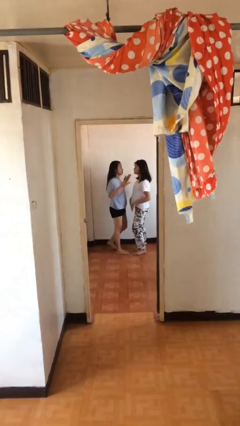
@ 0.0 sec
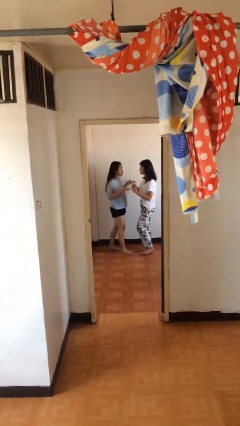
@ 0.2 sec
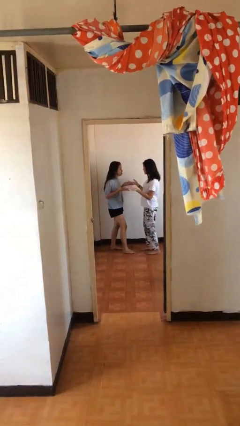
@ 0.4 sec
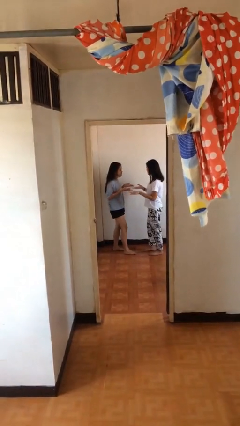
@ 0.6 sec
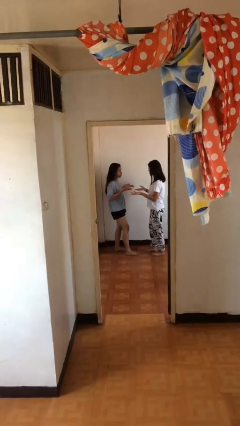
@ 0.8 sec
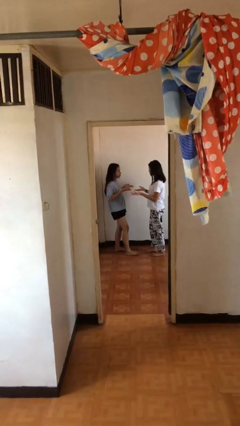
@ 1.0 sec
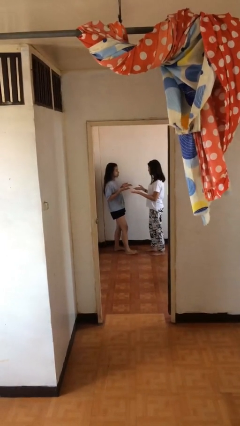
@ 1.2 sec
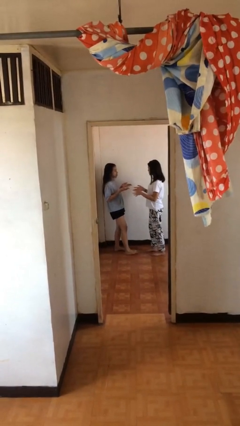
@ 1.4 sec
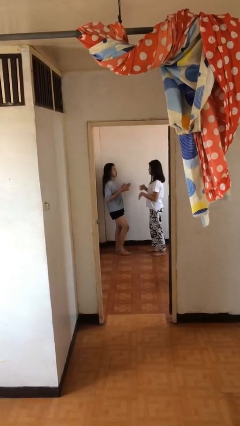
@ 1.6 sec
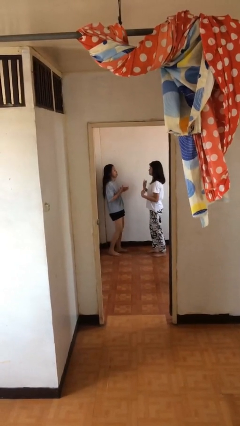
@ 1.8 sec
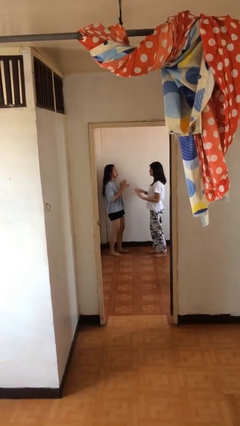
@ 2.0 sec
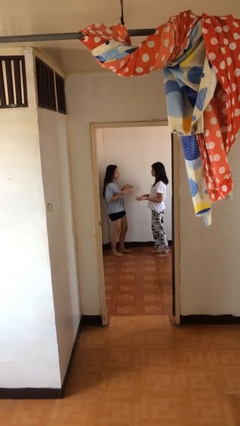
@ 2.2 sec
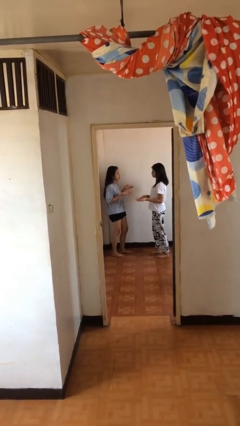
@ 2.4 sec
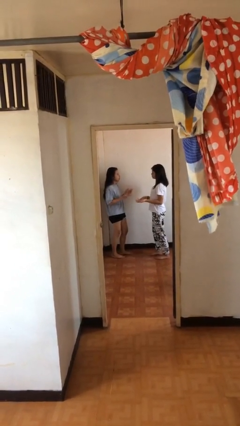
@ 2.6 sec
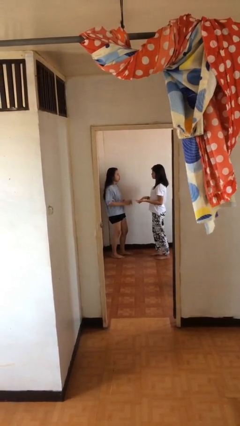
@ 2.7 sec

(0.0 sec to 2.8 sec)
person talks to person

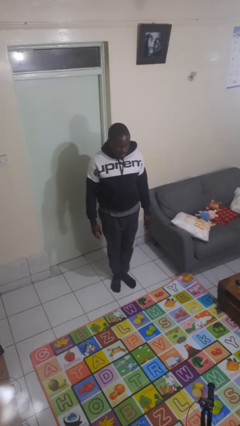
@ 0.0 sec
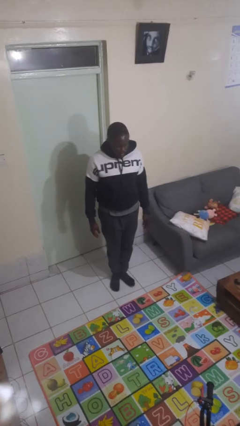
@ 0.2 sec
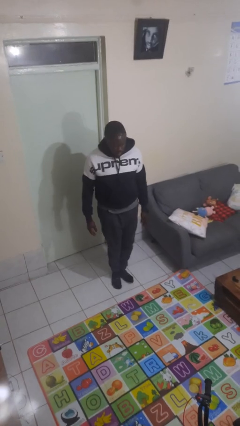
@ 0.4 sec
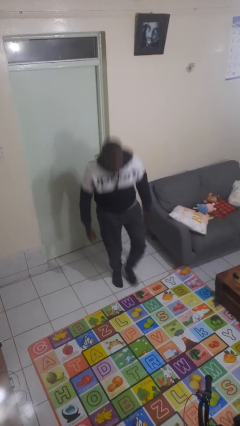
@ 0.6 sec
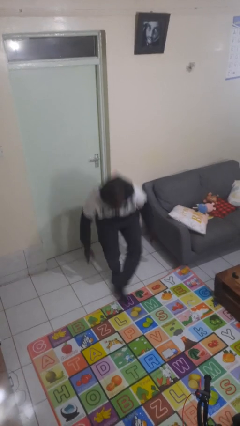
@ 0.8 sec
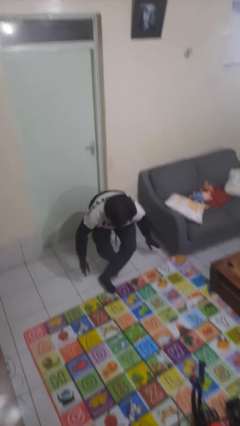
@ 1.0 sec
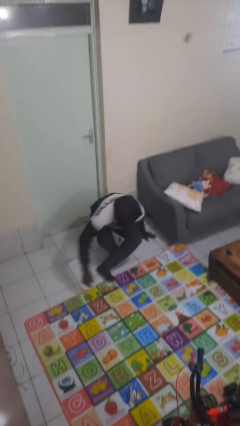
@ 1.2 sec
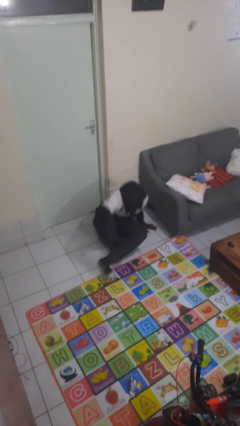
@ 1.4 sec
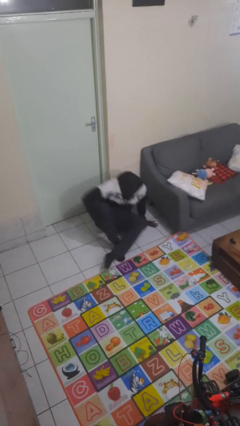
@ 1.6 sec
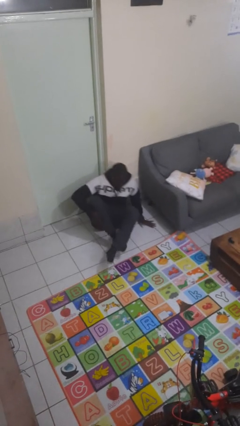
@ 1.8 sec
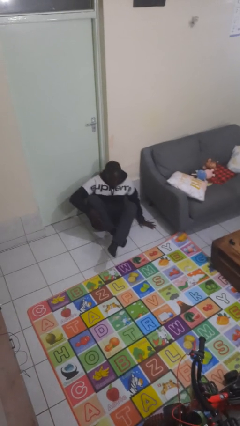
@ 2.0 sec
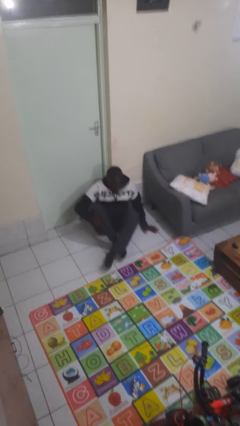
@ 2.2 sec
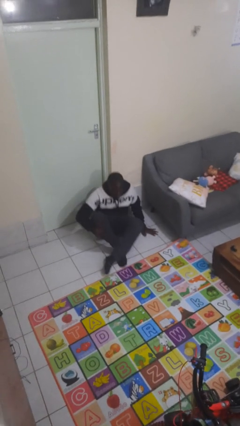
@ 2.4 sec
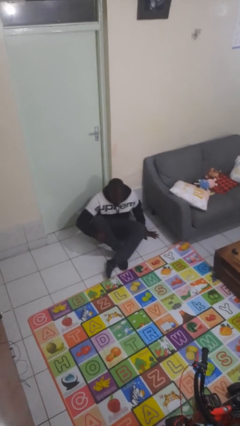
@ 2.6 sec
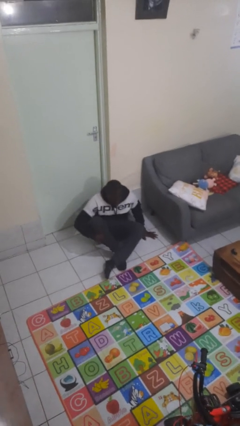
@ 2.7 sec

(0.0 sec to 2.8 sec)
person sits crisscross

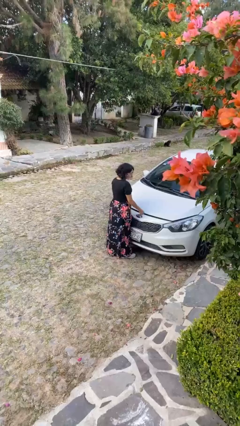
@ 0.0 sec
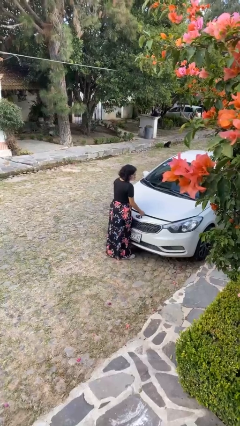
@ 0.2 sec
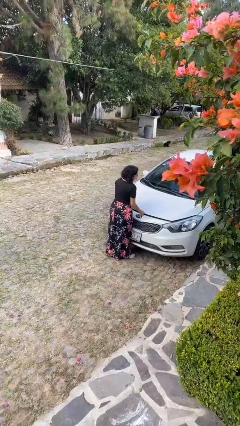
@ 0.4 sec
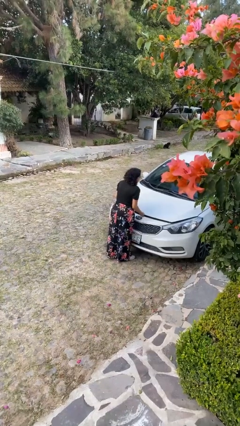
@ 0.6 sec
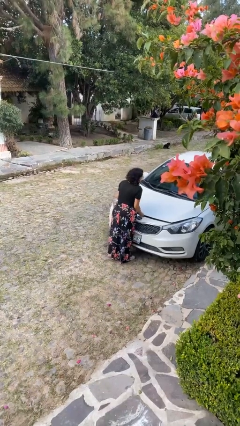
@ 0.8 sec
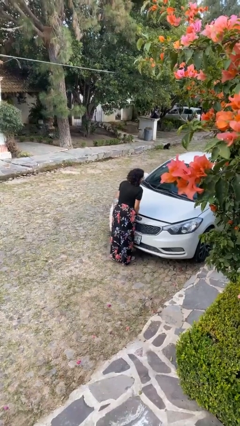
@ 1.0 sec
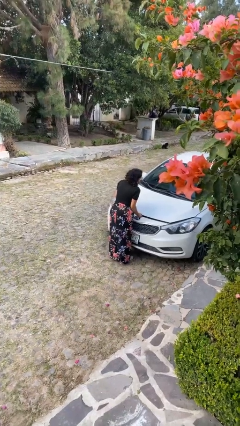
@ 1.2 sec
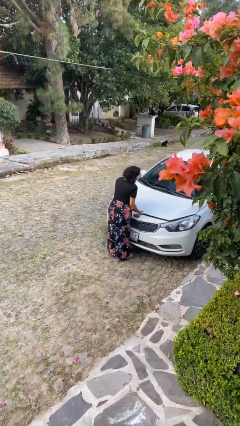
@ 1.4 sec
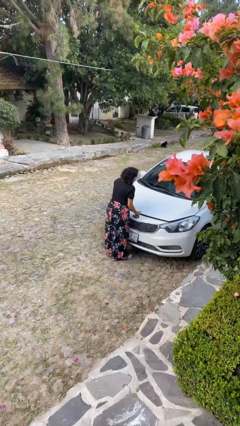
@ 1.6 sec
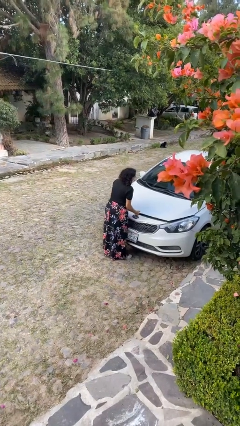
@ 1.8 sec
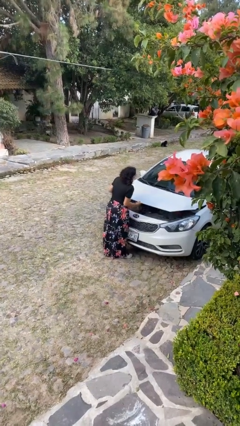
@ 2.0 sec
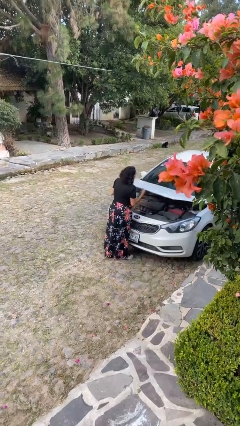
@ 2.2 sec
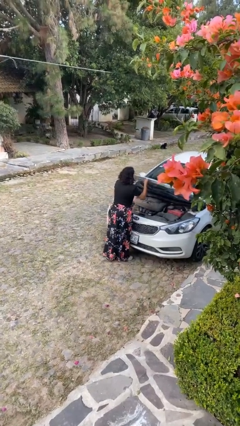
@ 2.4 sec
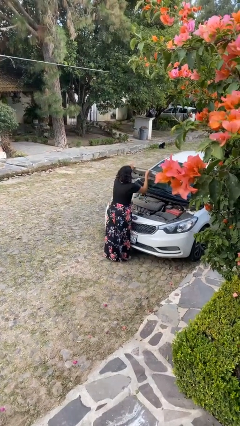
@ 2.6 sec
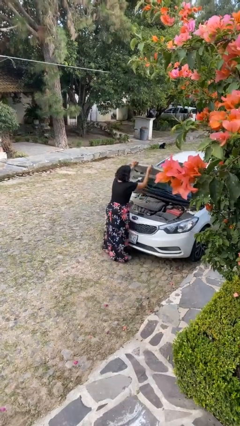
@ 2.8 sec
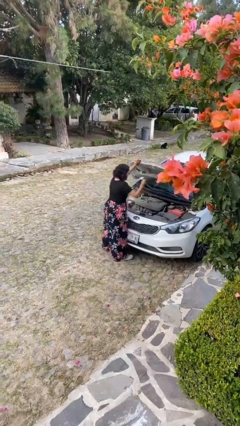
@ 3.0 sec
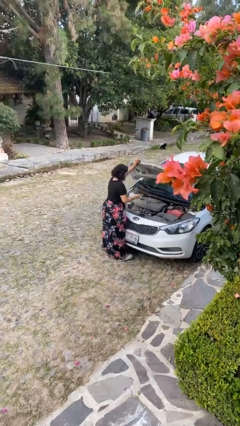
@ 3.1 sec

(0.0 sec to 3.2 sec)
person opens car hood

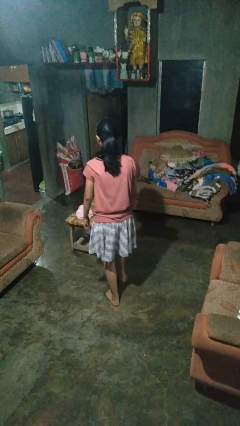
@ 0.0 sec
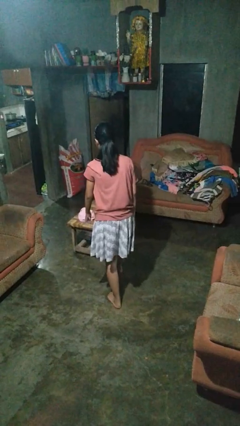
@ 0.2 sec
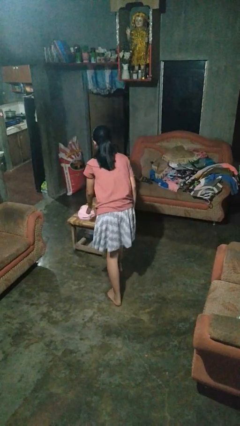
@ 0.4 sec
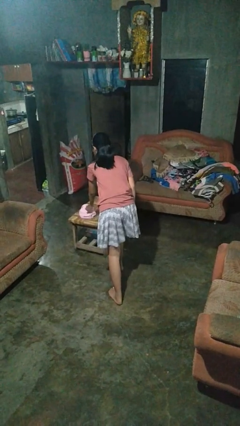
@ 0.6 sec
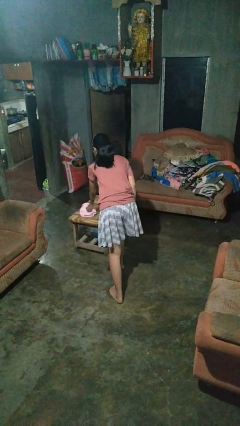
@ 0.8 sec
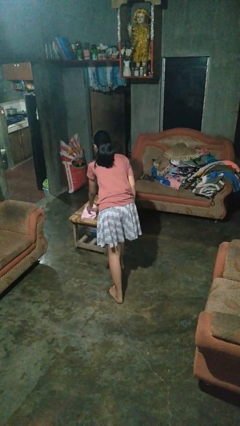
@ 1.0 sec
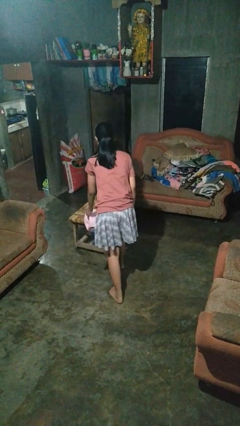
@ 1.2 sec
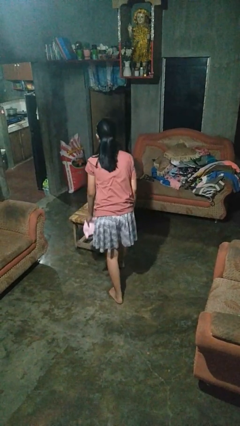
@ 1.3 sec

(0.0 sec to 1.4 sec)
person picks up object from table

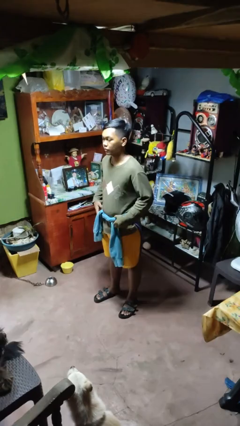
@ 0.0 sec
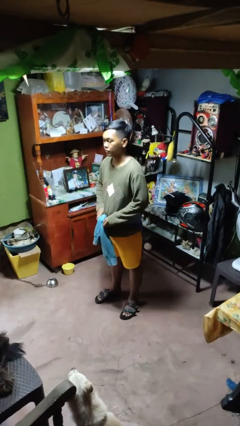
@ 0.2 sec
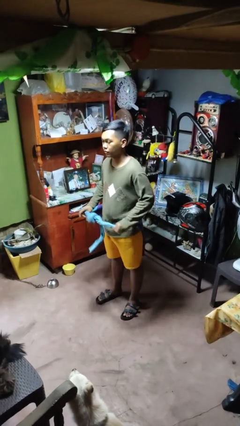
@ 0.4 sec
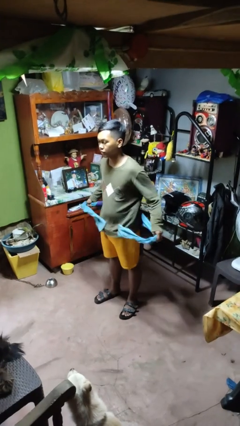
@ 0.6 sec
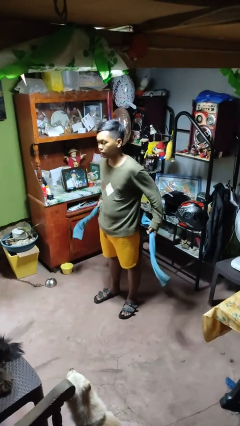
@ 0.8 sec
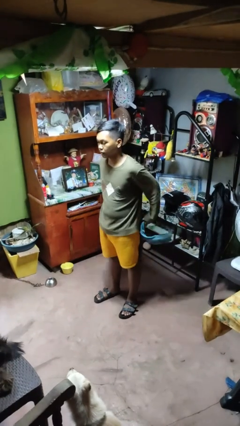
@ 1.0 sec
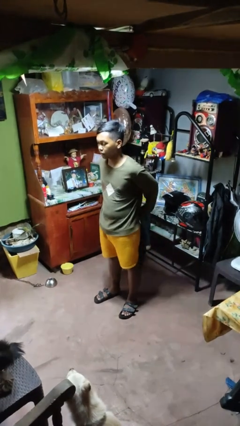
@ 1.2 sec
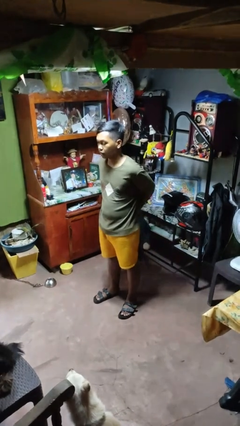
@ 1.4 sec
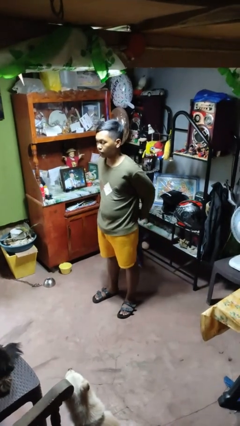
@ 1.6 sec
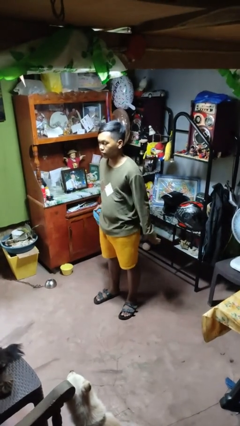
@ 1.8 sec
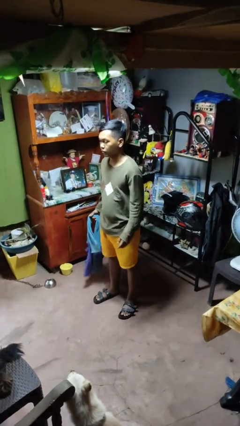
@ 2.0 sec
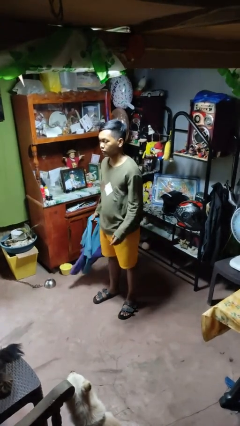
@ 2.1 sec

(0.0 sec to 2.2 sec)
person unties jacket around waist

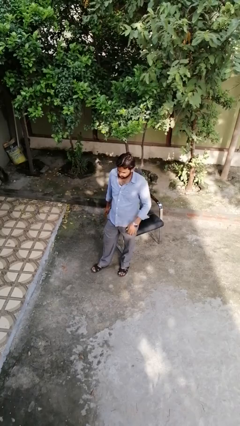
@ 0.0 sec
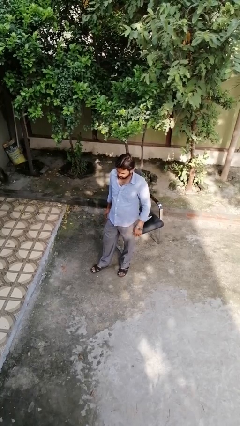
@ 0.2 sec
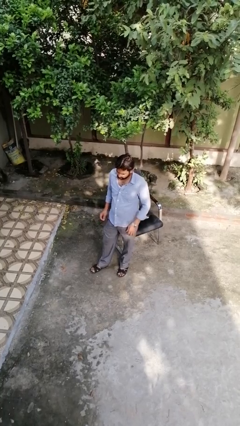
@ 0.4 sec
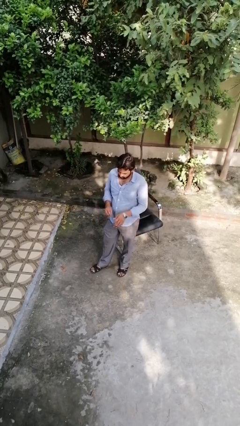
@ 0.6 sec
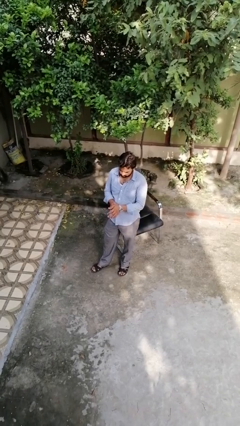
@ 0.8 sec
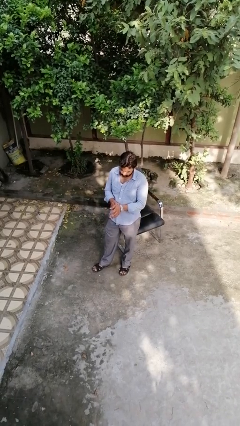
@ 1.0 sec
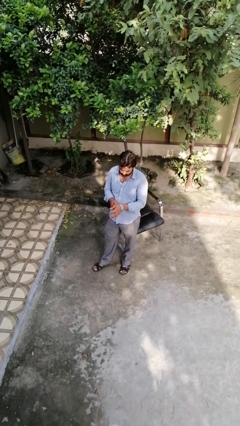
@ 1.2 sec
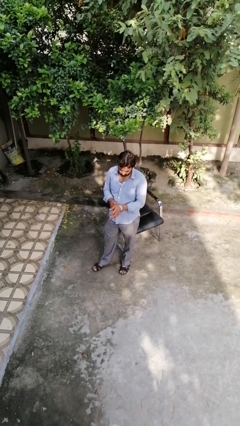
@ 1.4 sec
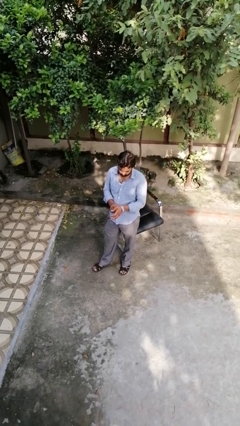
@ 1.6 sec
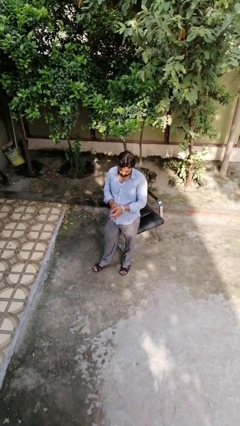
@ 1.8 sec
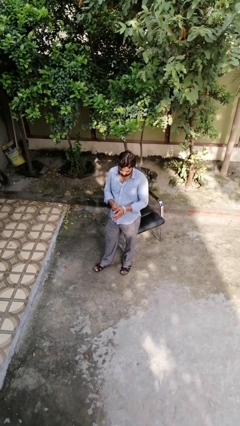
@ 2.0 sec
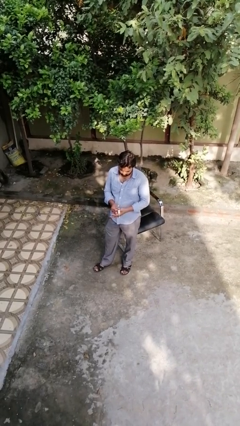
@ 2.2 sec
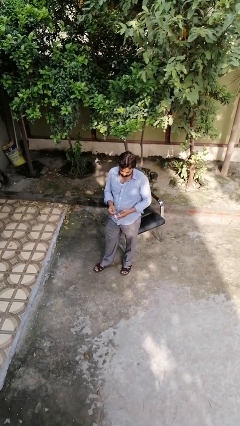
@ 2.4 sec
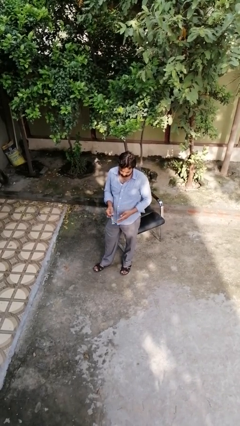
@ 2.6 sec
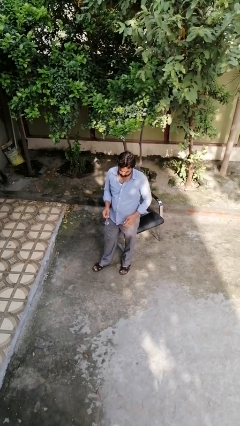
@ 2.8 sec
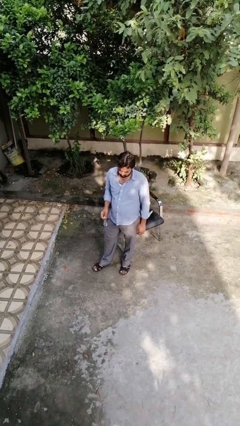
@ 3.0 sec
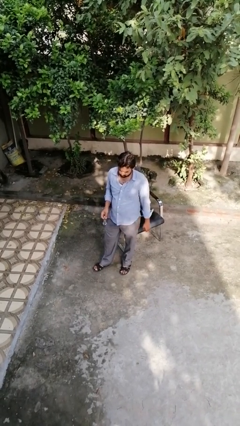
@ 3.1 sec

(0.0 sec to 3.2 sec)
person takes off wristwatch

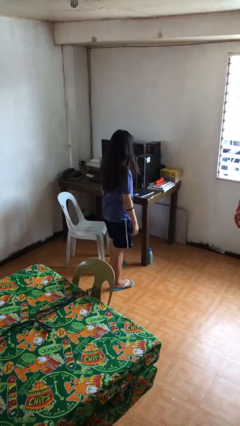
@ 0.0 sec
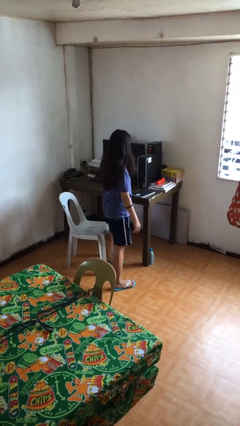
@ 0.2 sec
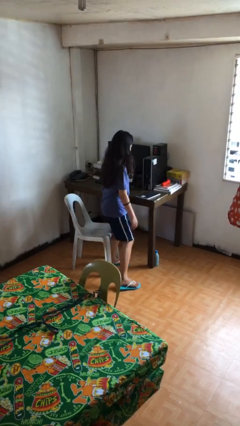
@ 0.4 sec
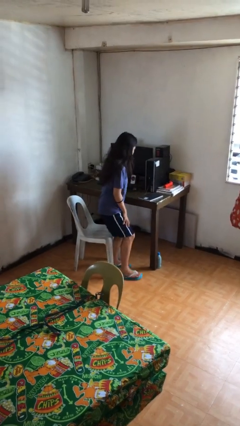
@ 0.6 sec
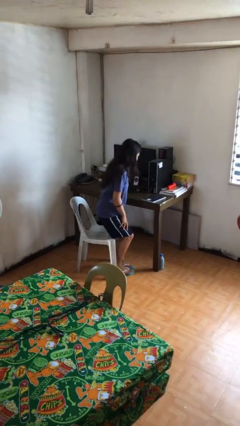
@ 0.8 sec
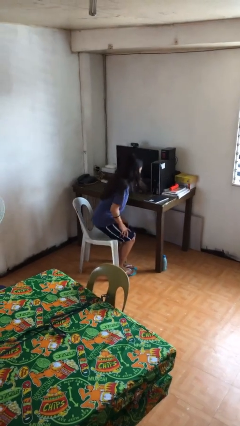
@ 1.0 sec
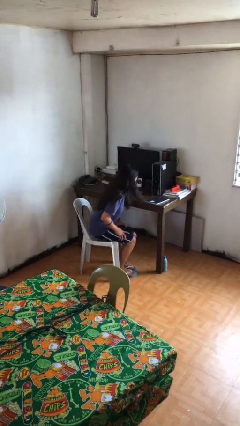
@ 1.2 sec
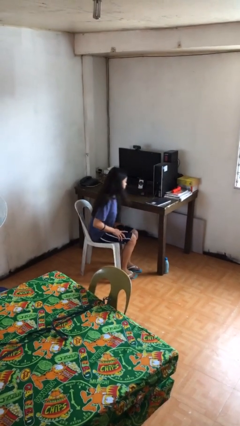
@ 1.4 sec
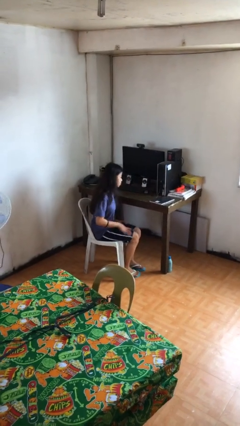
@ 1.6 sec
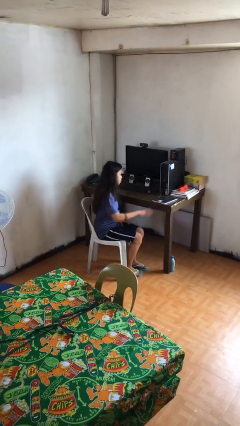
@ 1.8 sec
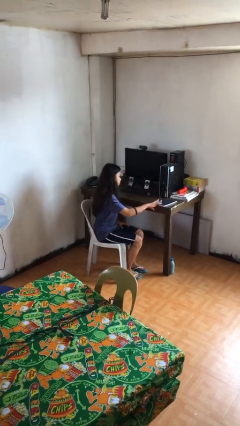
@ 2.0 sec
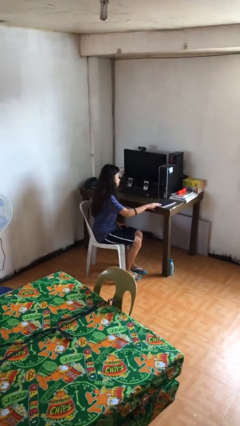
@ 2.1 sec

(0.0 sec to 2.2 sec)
person sits down
